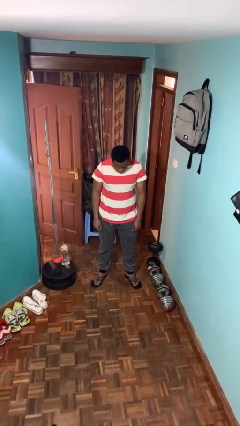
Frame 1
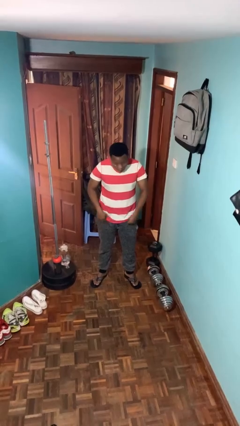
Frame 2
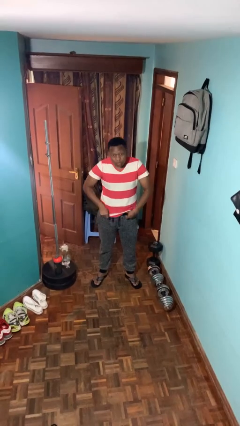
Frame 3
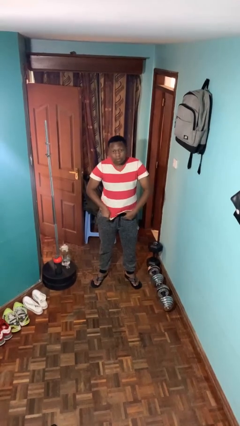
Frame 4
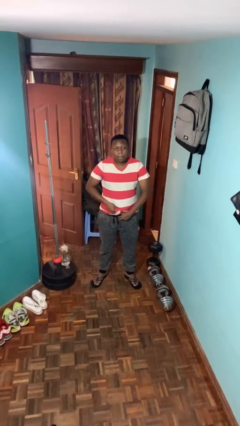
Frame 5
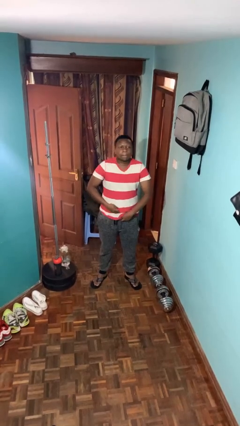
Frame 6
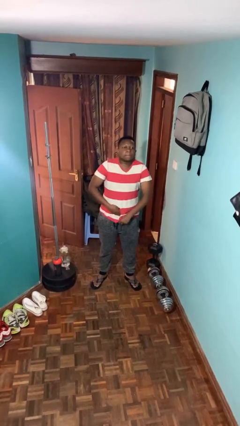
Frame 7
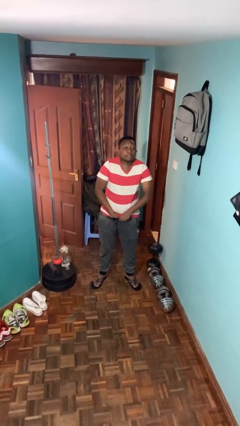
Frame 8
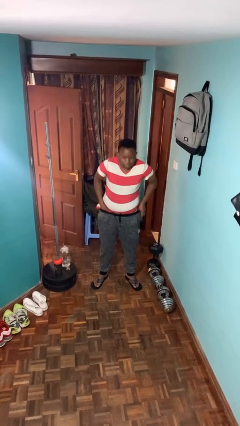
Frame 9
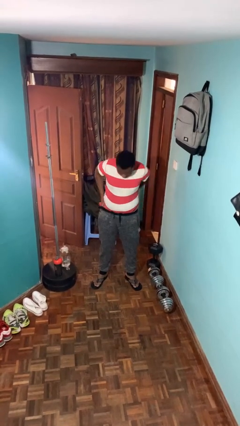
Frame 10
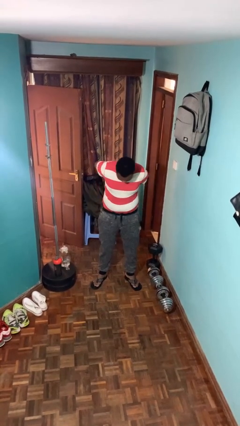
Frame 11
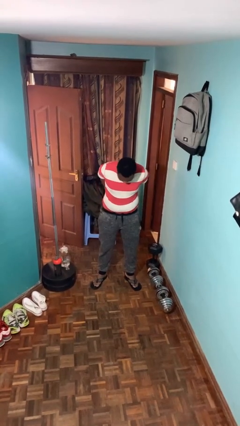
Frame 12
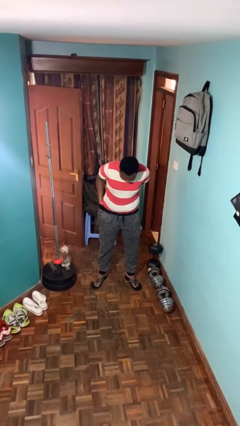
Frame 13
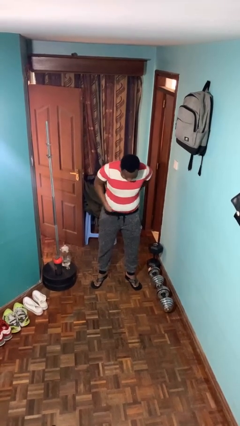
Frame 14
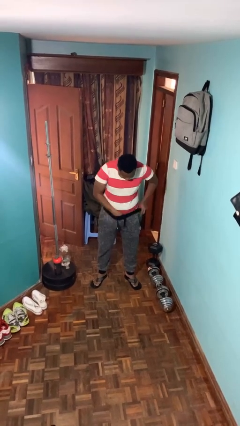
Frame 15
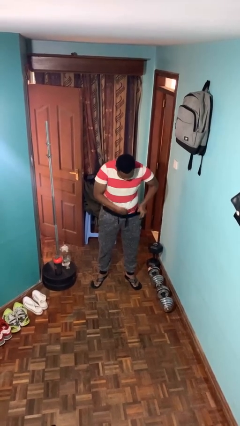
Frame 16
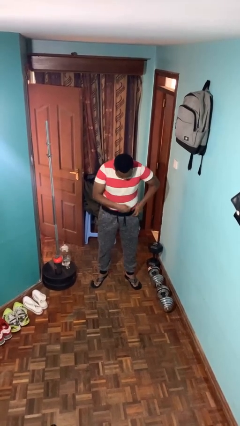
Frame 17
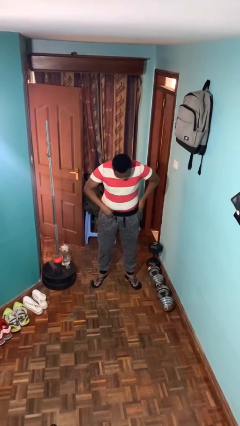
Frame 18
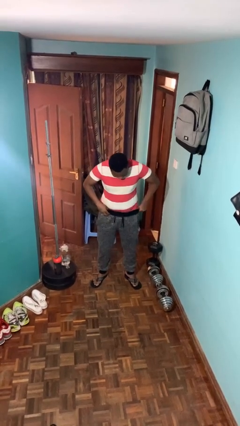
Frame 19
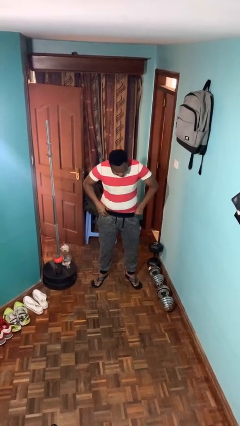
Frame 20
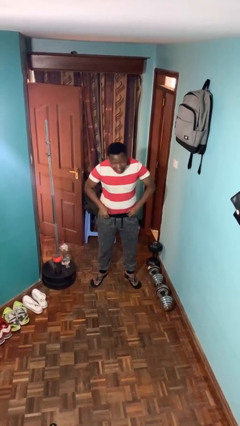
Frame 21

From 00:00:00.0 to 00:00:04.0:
person tucks in shirt

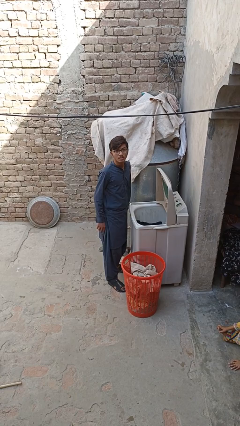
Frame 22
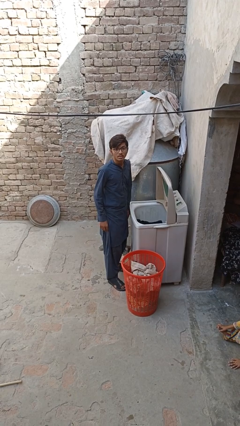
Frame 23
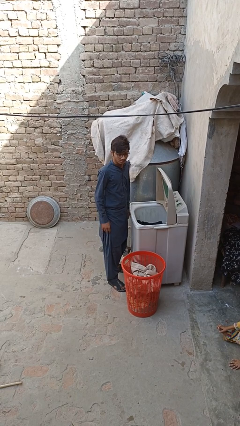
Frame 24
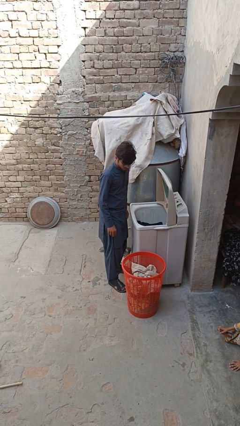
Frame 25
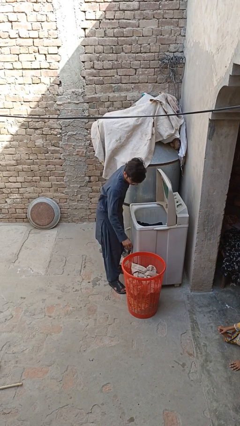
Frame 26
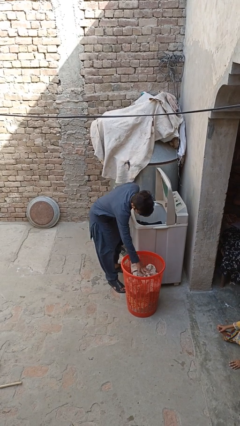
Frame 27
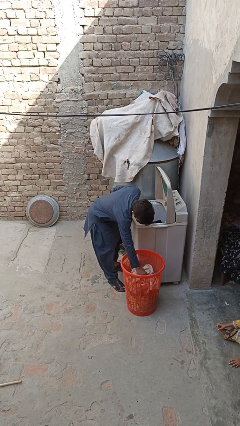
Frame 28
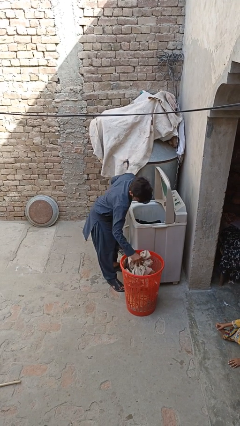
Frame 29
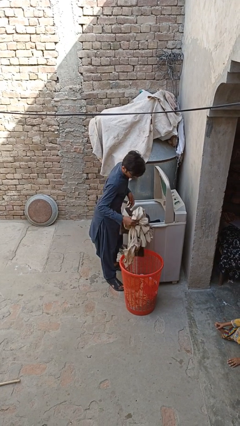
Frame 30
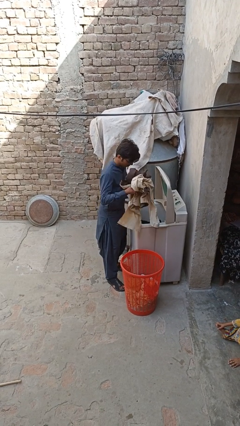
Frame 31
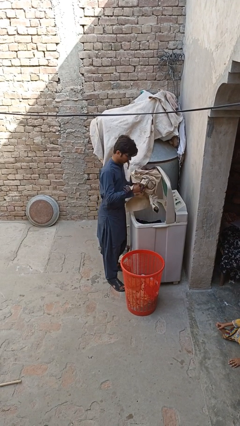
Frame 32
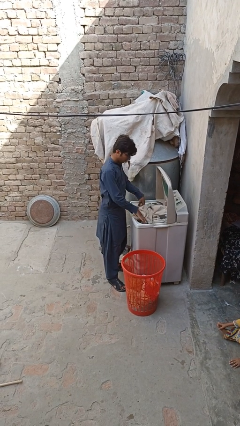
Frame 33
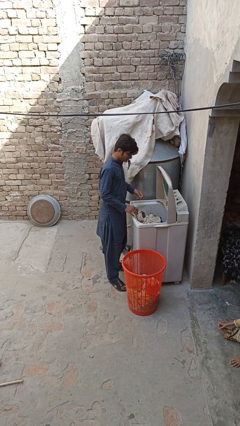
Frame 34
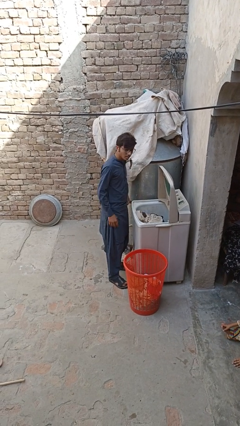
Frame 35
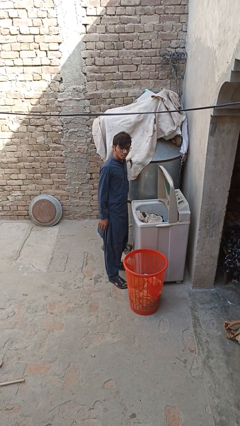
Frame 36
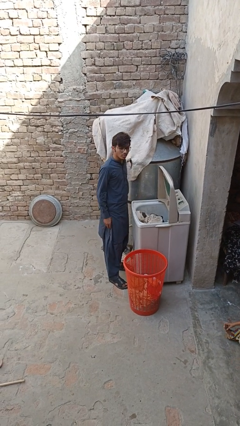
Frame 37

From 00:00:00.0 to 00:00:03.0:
person loads clotheswasher

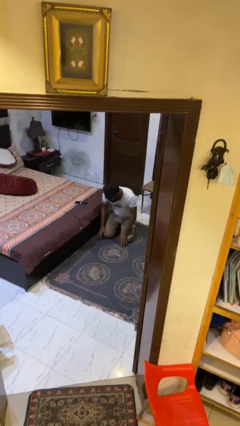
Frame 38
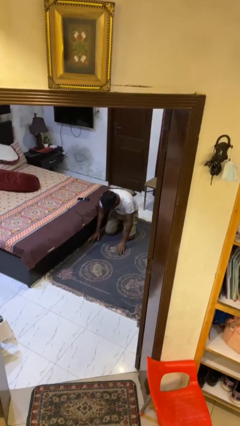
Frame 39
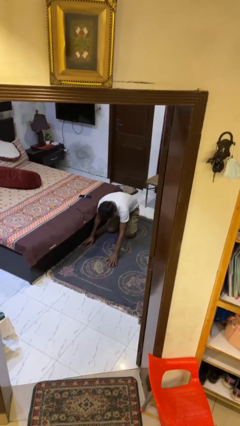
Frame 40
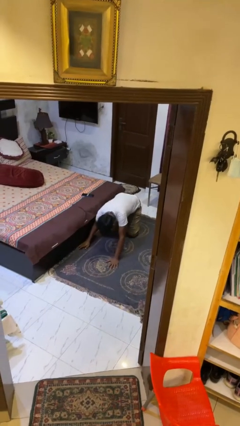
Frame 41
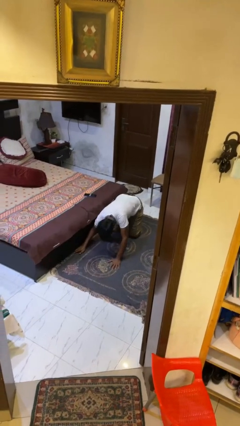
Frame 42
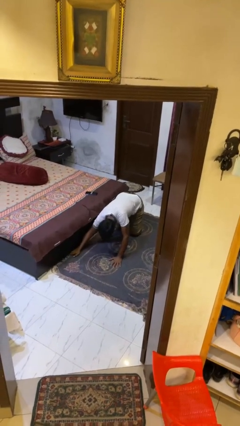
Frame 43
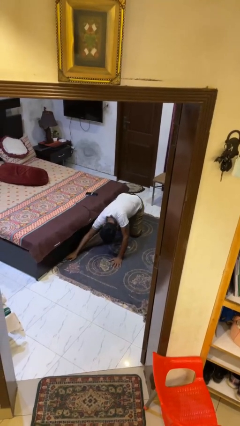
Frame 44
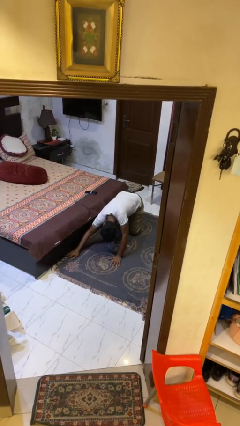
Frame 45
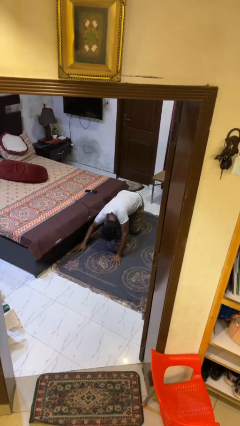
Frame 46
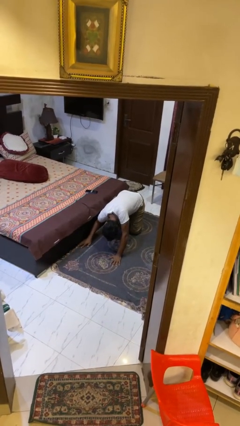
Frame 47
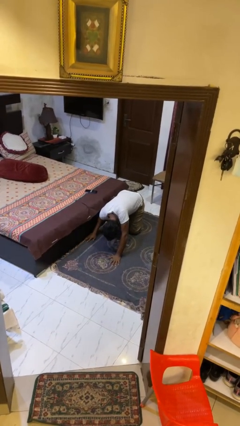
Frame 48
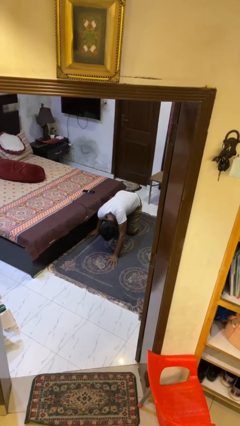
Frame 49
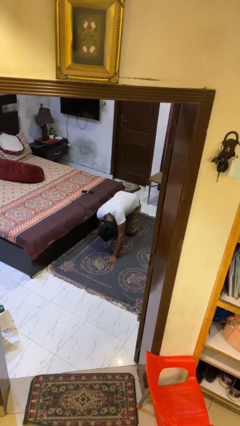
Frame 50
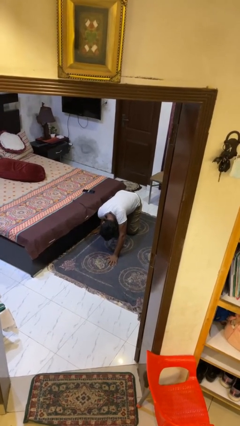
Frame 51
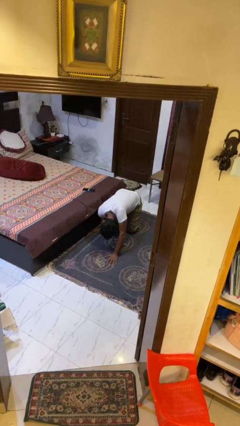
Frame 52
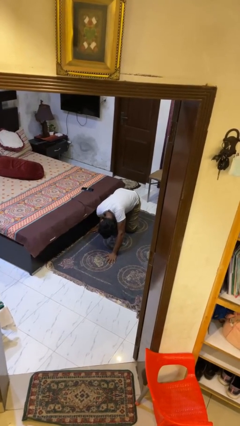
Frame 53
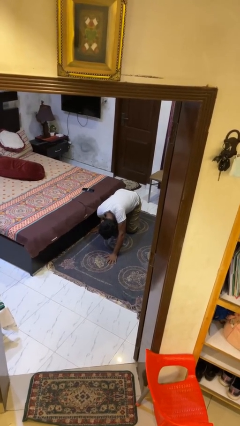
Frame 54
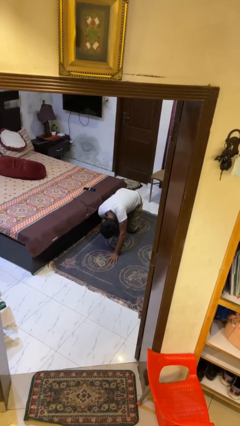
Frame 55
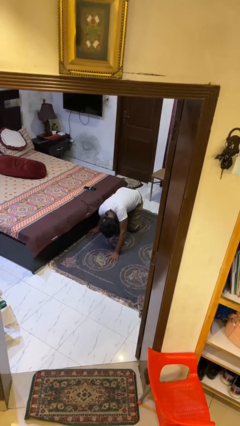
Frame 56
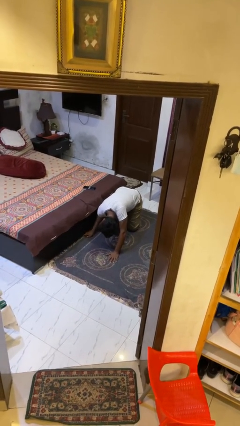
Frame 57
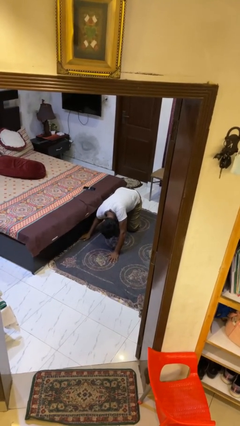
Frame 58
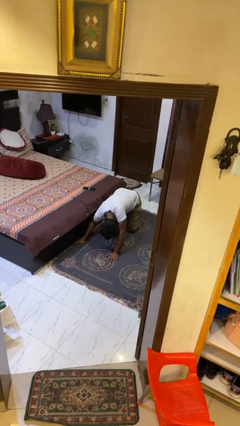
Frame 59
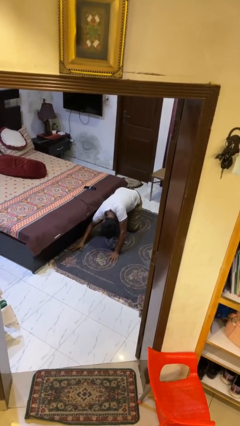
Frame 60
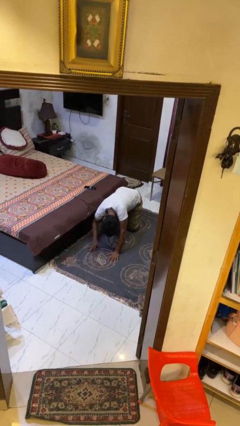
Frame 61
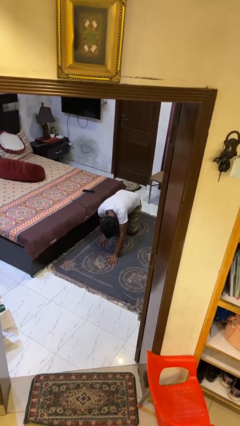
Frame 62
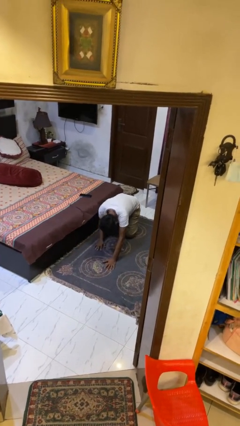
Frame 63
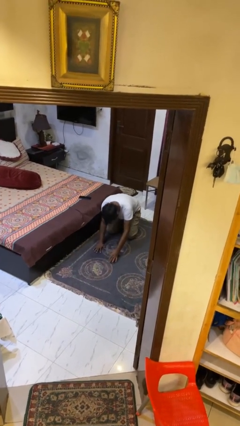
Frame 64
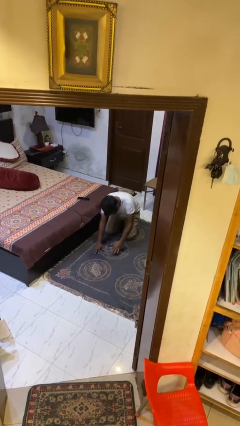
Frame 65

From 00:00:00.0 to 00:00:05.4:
person searches under bed

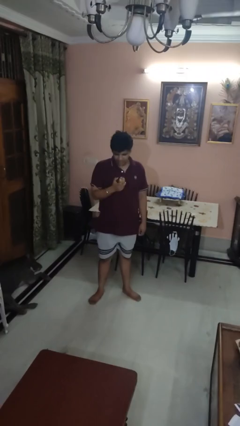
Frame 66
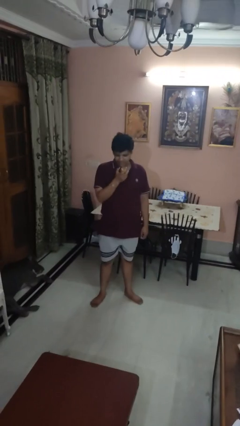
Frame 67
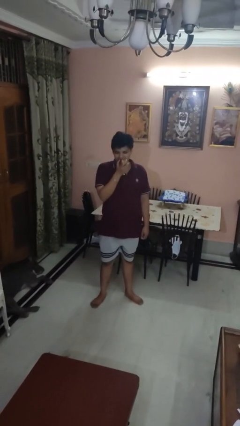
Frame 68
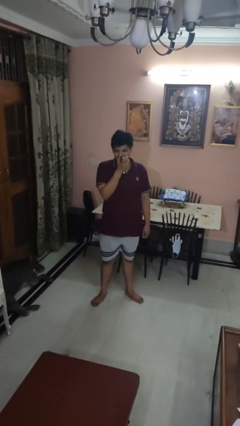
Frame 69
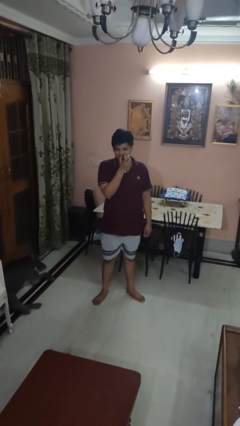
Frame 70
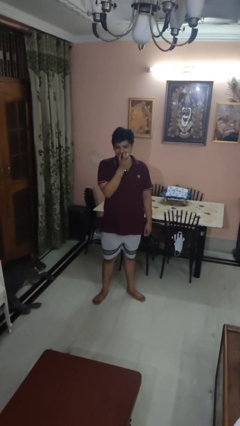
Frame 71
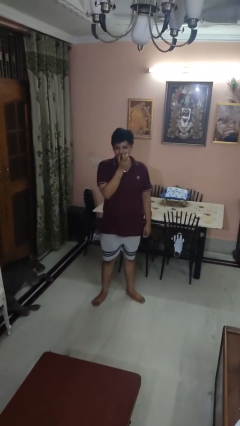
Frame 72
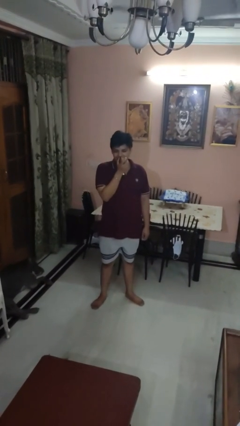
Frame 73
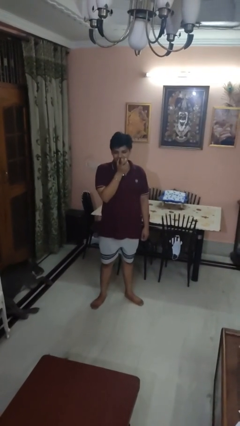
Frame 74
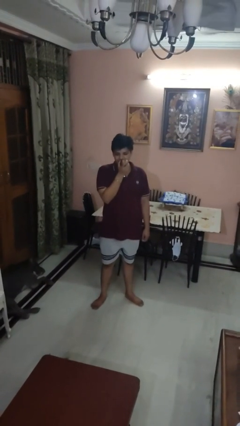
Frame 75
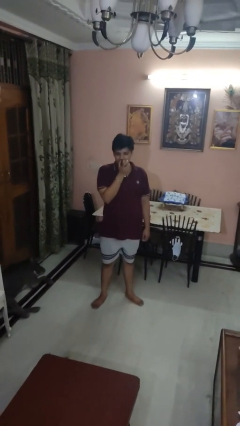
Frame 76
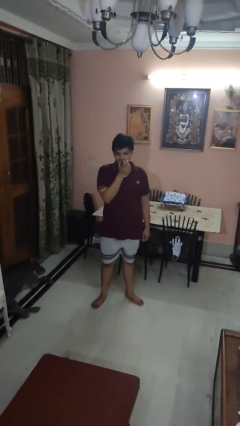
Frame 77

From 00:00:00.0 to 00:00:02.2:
person eats apple

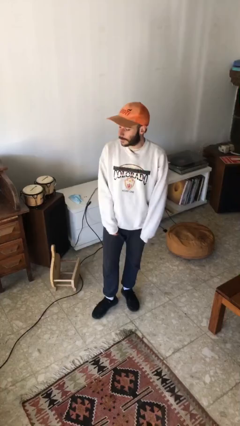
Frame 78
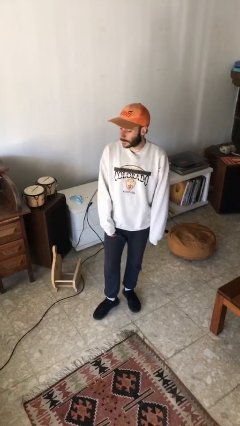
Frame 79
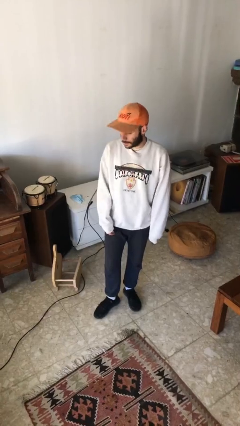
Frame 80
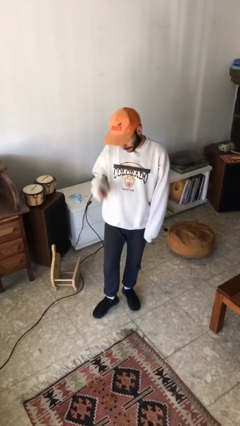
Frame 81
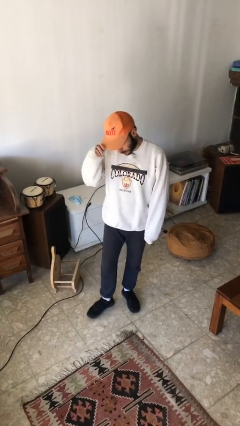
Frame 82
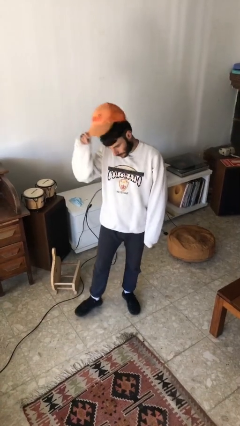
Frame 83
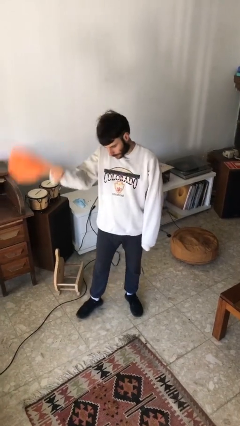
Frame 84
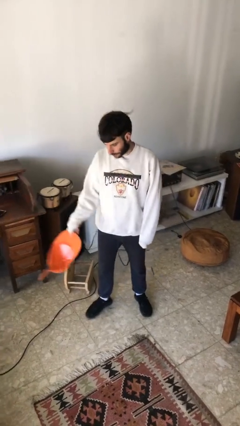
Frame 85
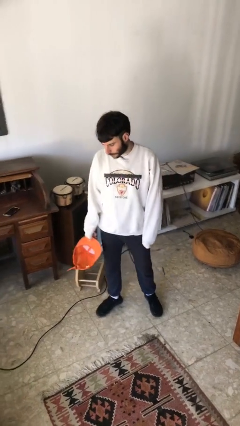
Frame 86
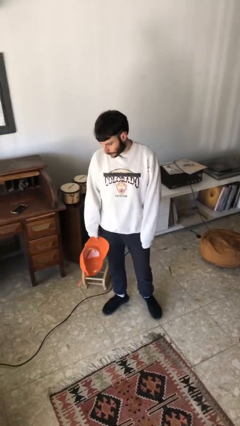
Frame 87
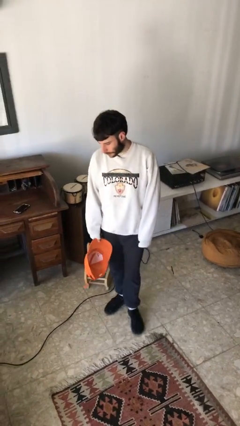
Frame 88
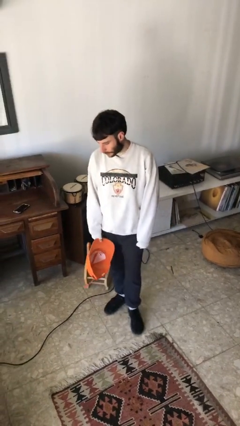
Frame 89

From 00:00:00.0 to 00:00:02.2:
person takes off hat

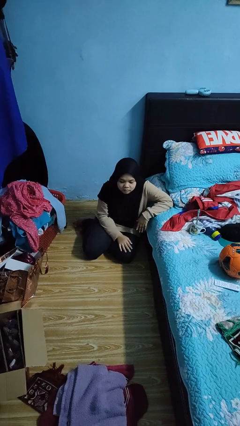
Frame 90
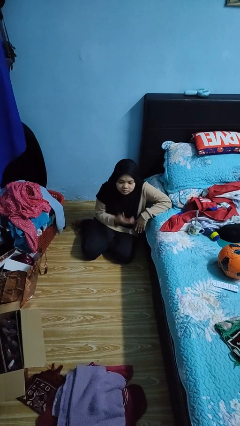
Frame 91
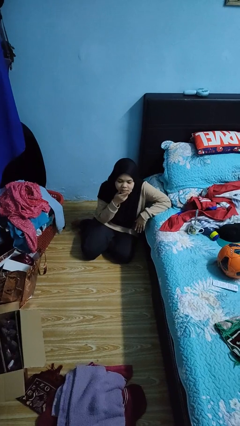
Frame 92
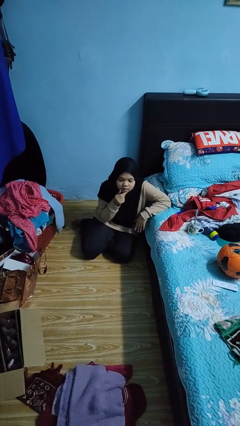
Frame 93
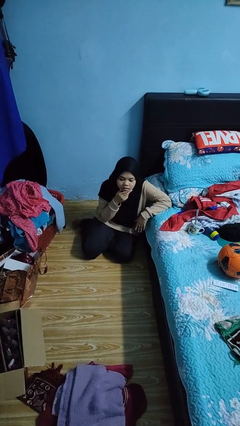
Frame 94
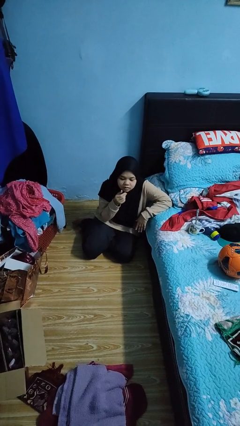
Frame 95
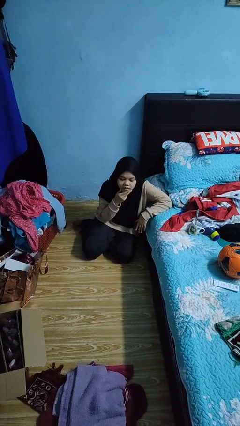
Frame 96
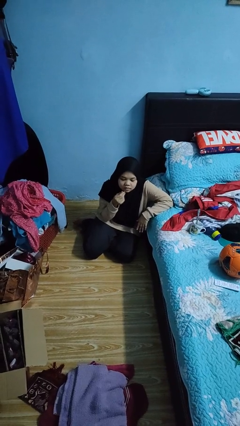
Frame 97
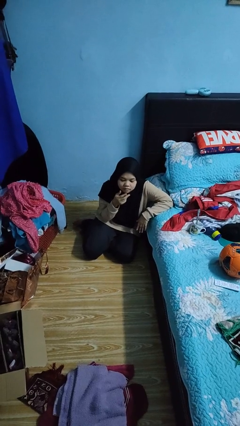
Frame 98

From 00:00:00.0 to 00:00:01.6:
person strokes chin
